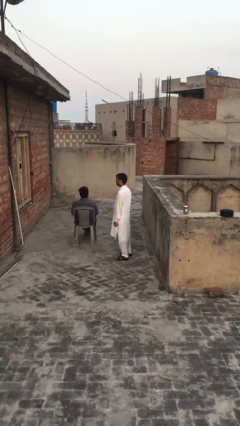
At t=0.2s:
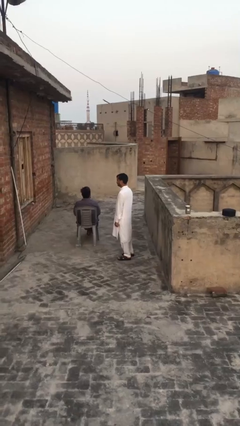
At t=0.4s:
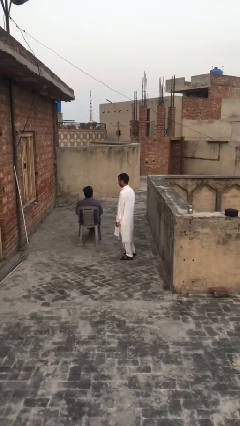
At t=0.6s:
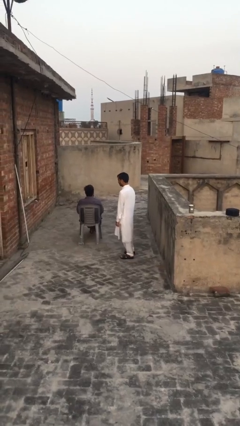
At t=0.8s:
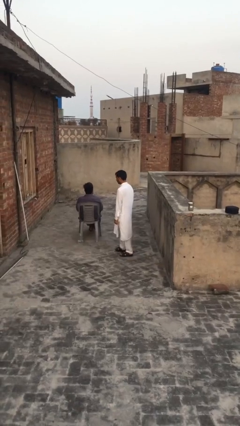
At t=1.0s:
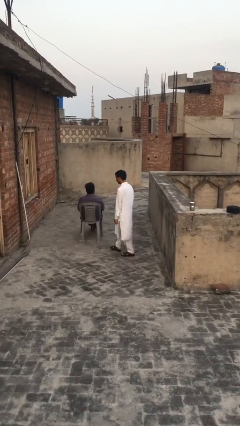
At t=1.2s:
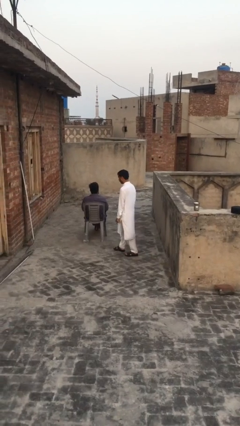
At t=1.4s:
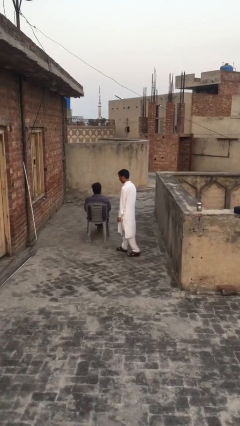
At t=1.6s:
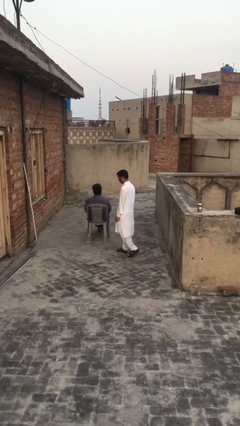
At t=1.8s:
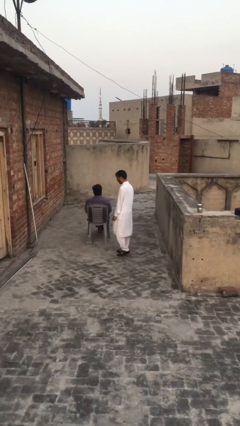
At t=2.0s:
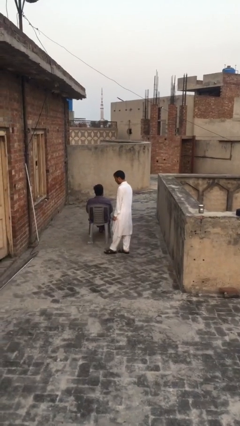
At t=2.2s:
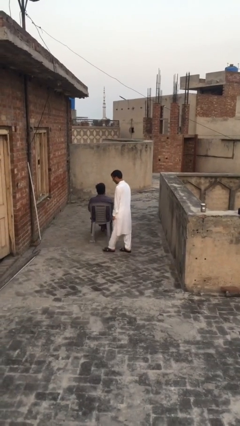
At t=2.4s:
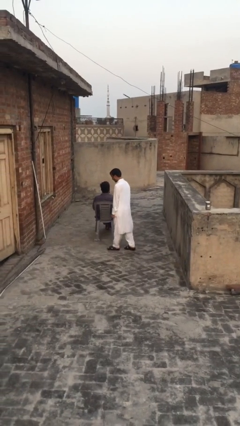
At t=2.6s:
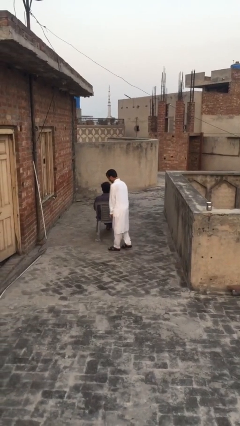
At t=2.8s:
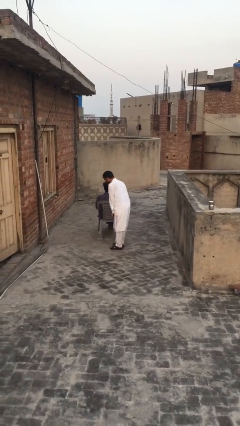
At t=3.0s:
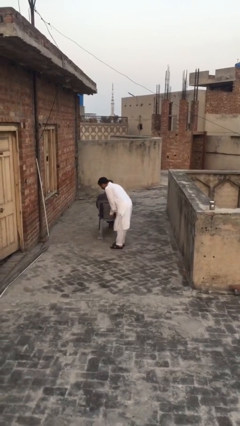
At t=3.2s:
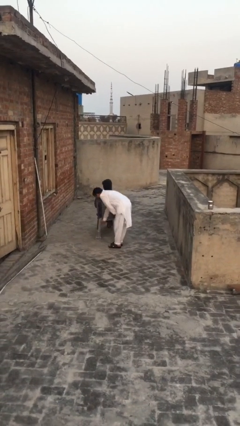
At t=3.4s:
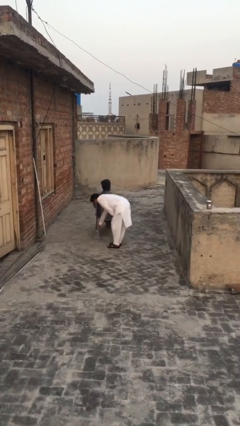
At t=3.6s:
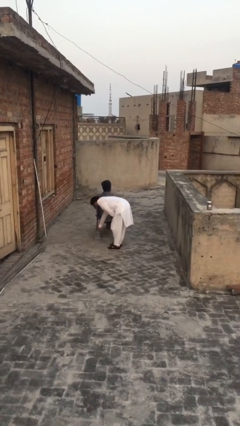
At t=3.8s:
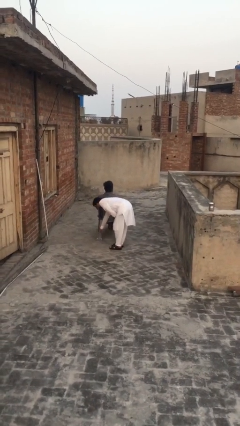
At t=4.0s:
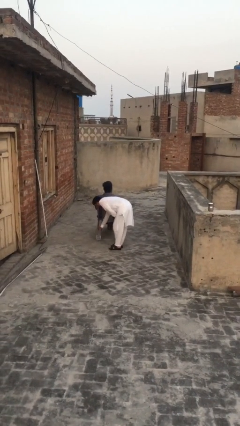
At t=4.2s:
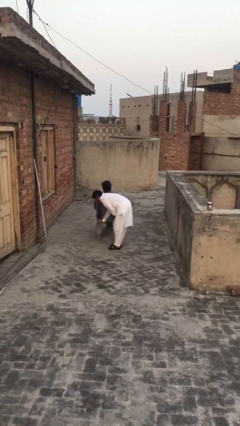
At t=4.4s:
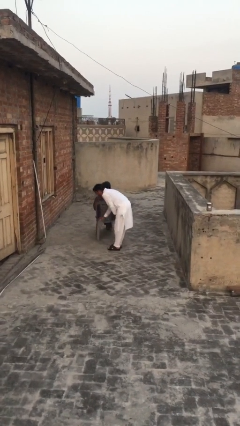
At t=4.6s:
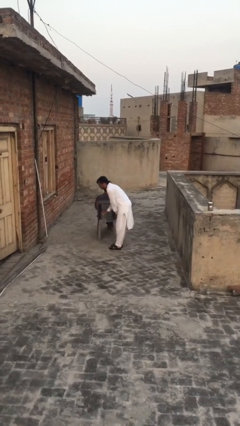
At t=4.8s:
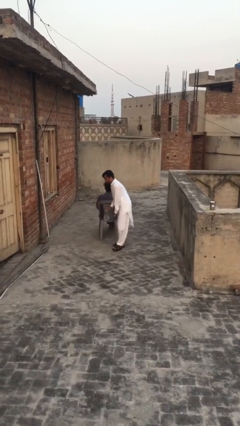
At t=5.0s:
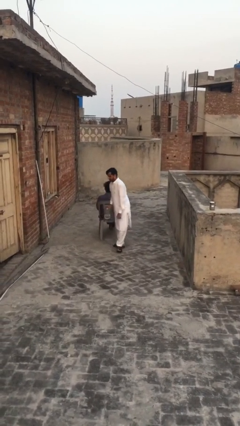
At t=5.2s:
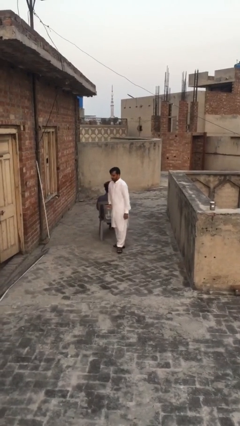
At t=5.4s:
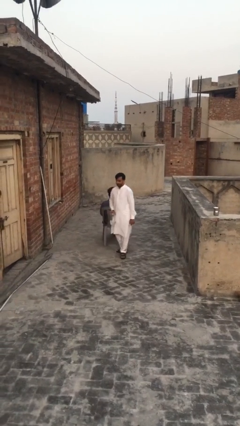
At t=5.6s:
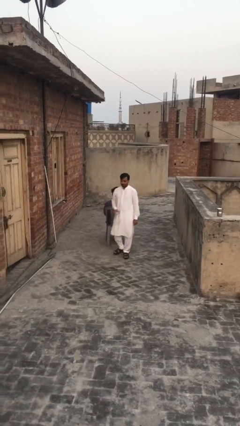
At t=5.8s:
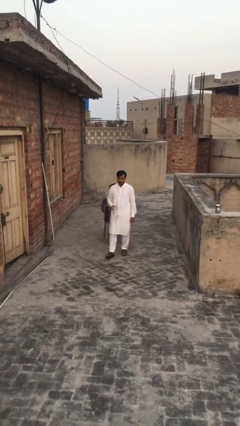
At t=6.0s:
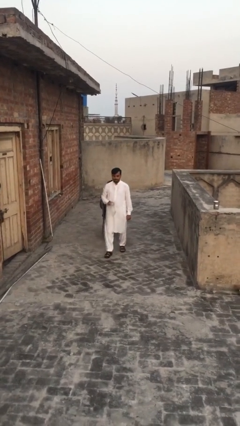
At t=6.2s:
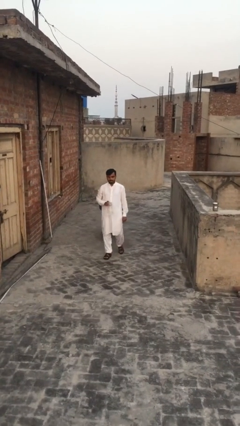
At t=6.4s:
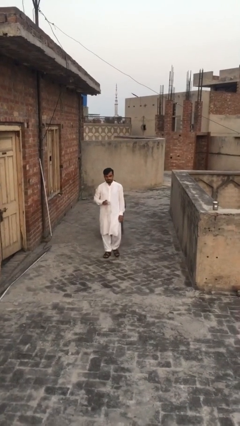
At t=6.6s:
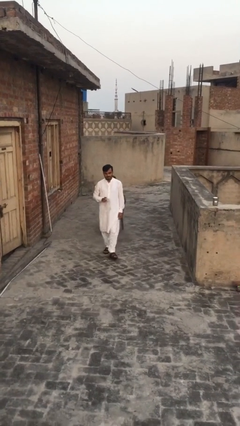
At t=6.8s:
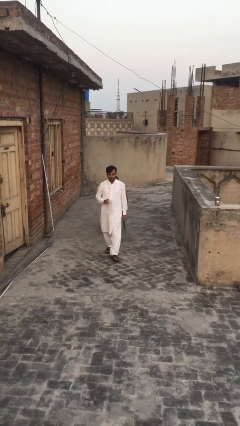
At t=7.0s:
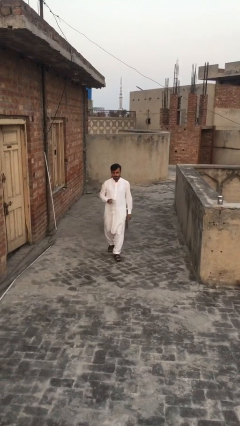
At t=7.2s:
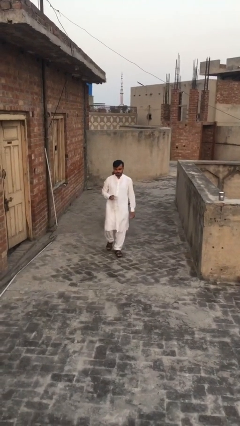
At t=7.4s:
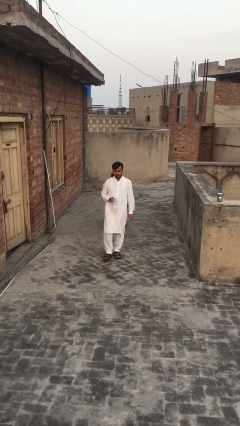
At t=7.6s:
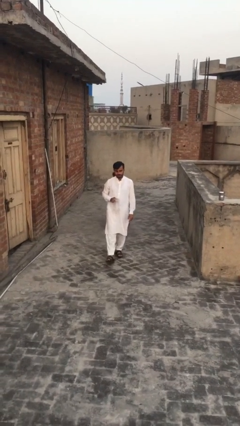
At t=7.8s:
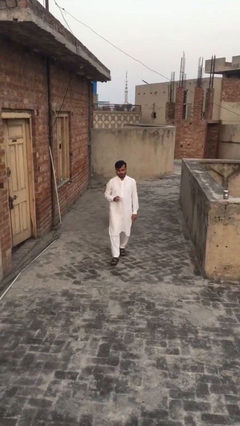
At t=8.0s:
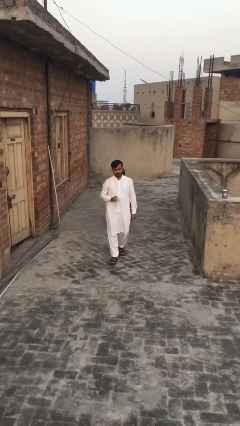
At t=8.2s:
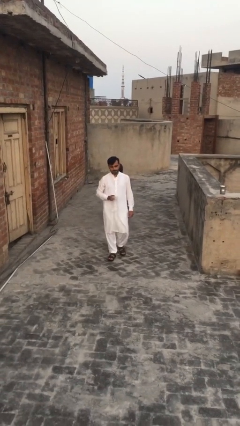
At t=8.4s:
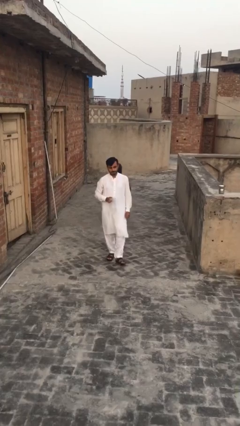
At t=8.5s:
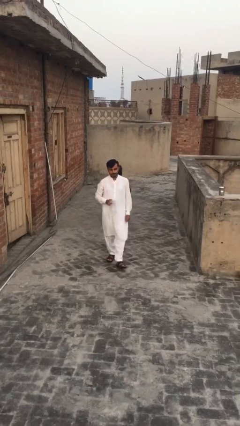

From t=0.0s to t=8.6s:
person steals object from person

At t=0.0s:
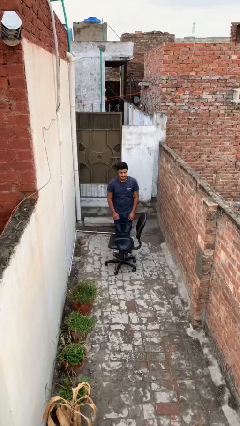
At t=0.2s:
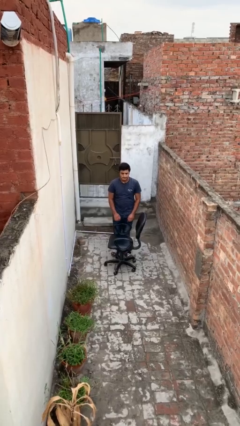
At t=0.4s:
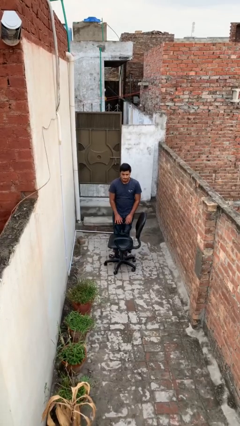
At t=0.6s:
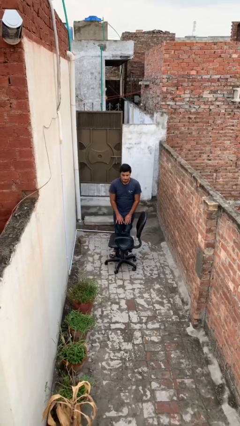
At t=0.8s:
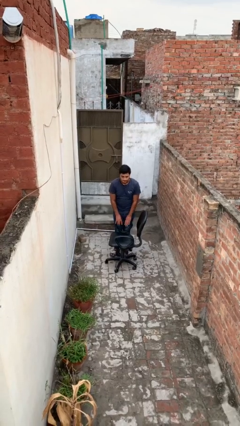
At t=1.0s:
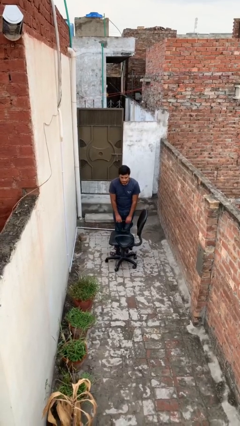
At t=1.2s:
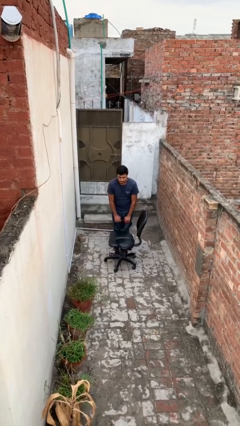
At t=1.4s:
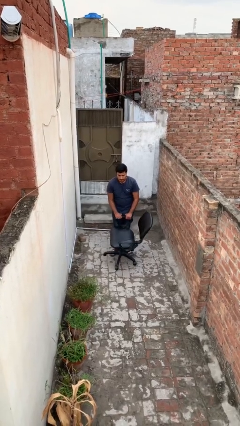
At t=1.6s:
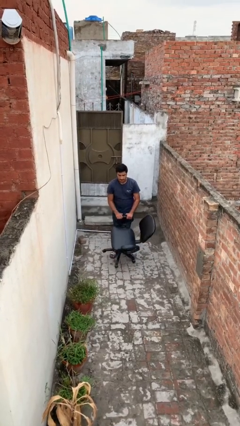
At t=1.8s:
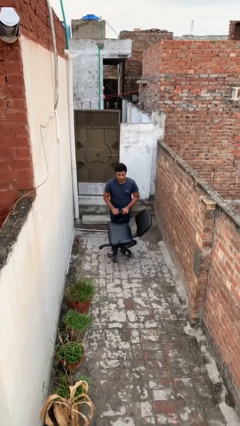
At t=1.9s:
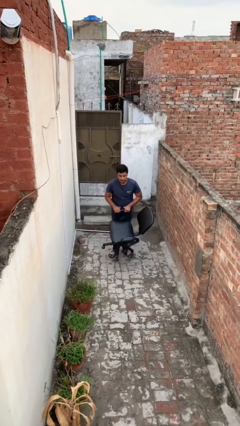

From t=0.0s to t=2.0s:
person picks up object from floor

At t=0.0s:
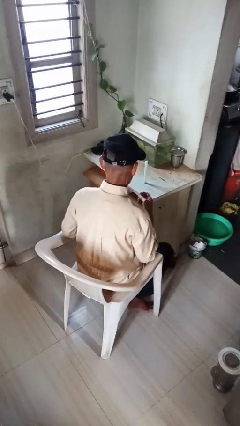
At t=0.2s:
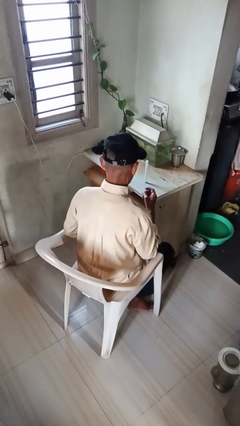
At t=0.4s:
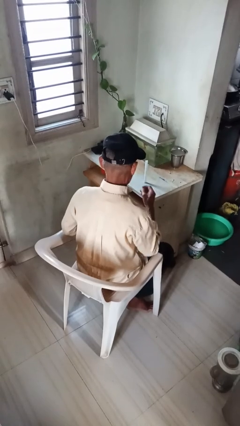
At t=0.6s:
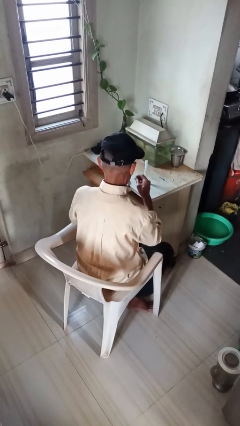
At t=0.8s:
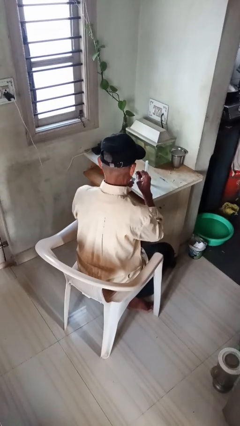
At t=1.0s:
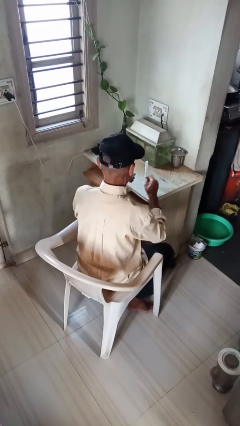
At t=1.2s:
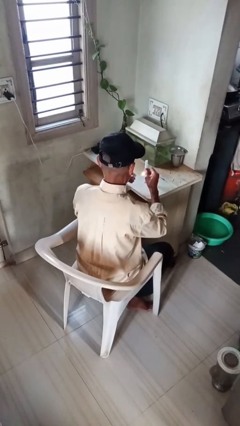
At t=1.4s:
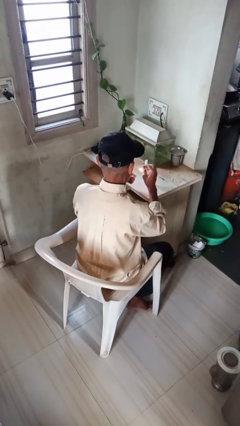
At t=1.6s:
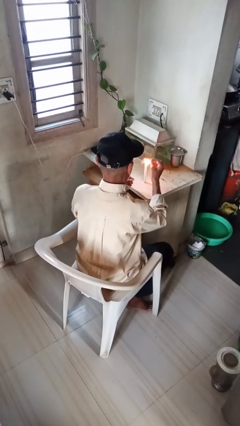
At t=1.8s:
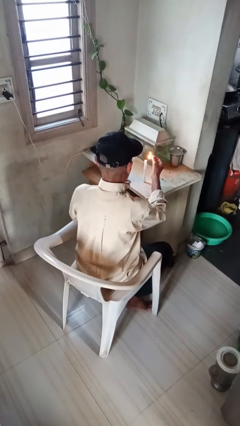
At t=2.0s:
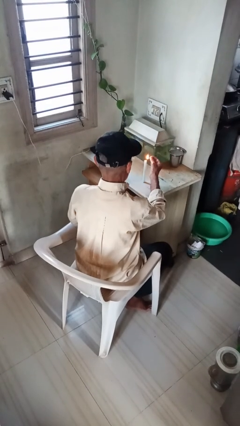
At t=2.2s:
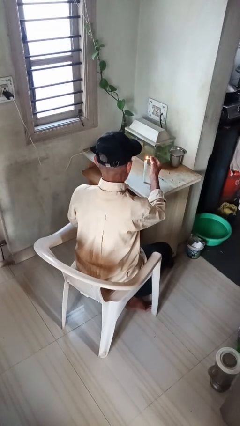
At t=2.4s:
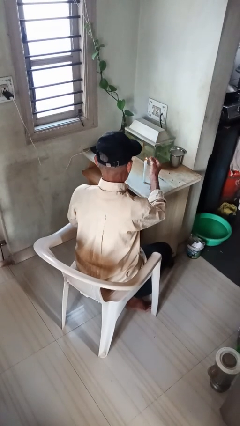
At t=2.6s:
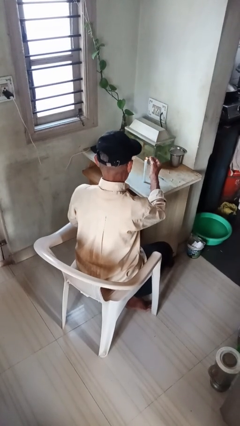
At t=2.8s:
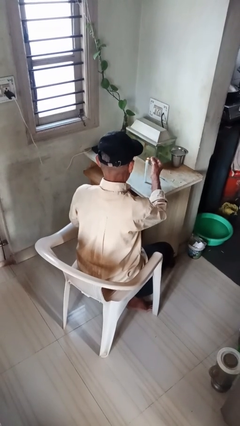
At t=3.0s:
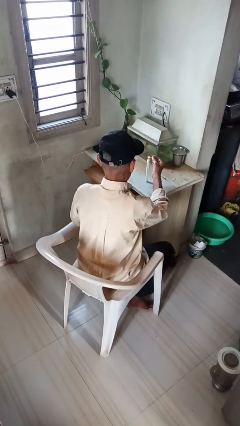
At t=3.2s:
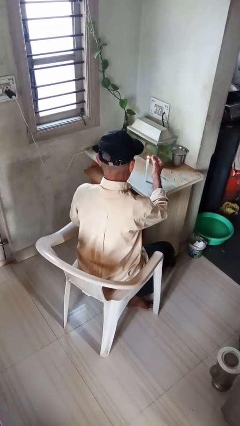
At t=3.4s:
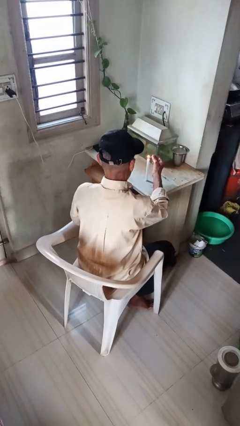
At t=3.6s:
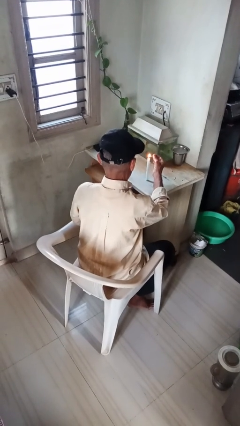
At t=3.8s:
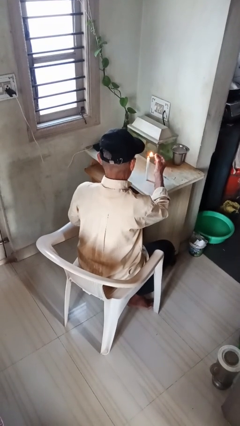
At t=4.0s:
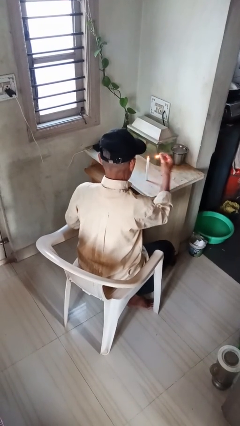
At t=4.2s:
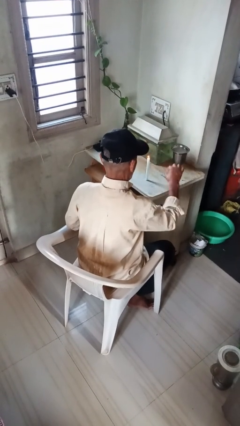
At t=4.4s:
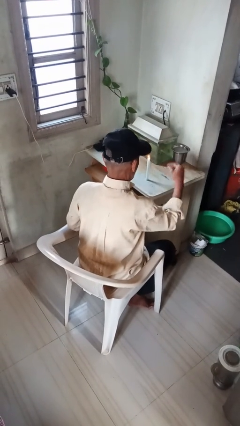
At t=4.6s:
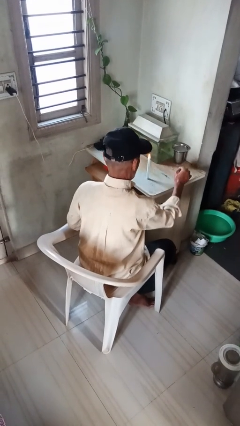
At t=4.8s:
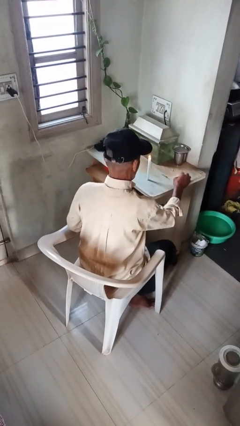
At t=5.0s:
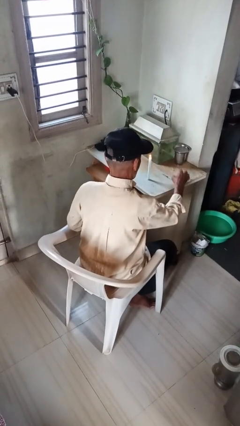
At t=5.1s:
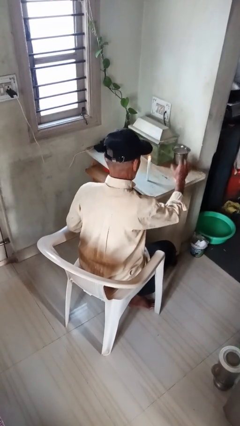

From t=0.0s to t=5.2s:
person lights candle

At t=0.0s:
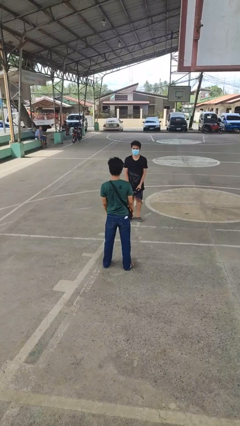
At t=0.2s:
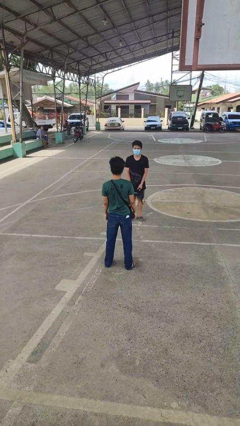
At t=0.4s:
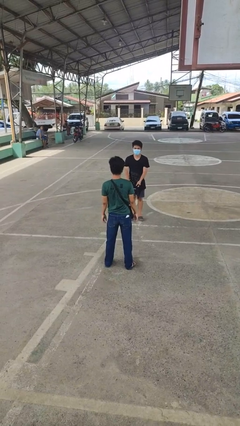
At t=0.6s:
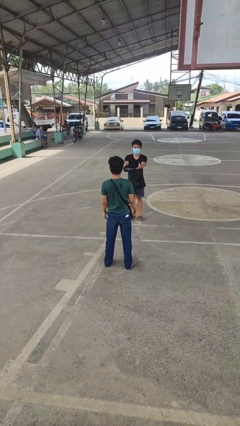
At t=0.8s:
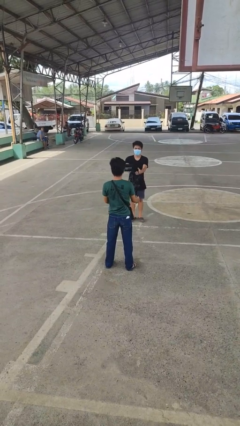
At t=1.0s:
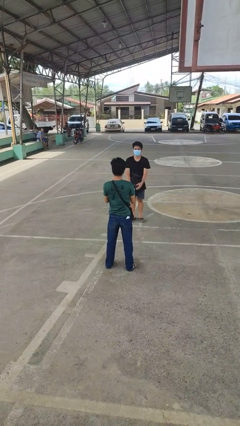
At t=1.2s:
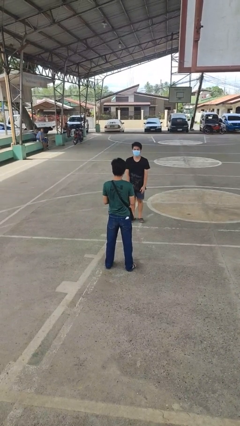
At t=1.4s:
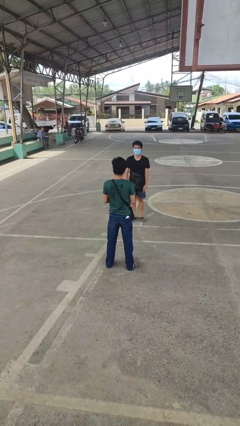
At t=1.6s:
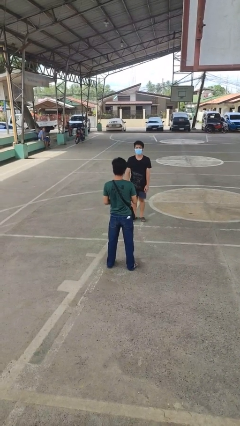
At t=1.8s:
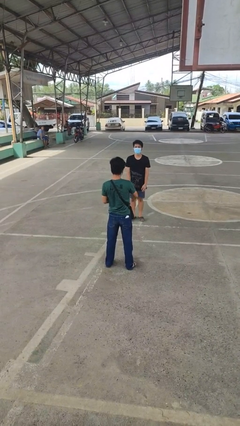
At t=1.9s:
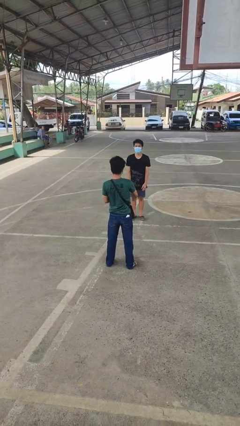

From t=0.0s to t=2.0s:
person catches object from person
